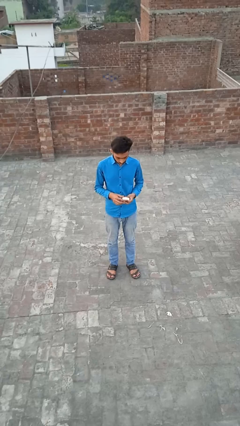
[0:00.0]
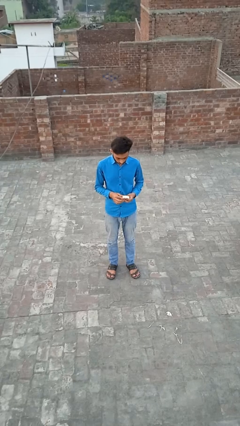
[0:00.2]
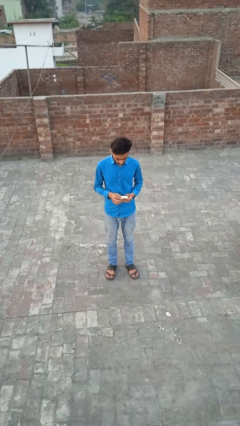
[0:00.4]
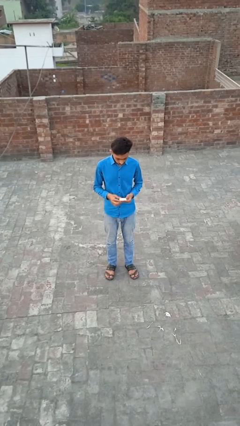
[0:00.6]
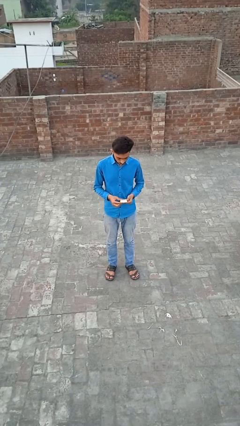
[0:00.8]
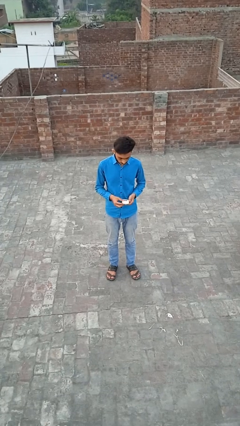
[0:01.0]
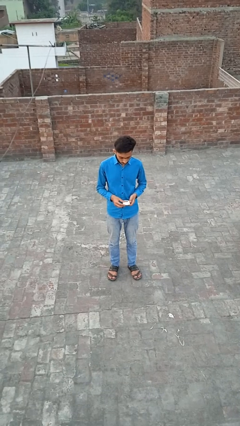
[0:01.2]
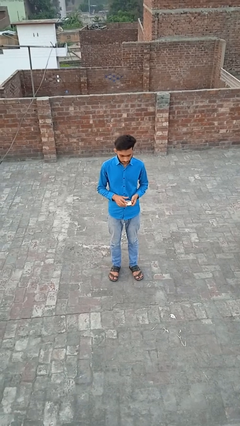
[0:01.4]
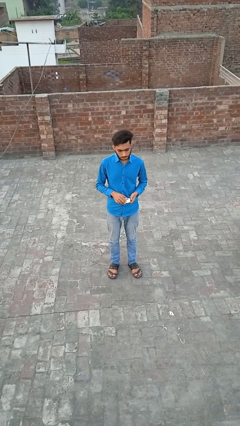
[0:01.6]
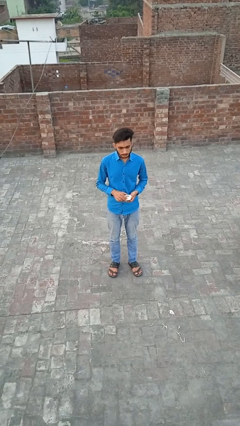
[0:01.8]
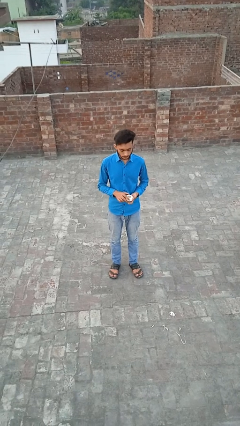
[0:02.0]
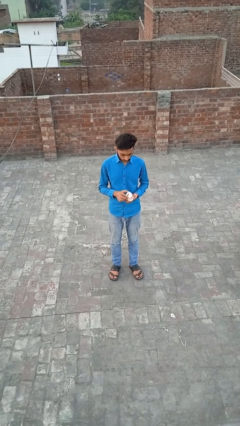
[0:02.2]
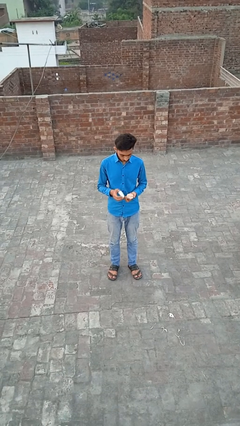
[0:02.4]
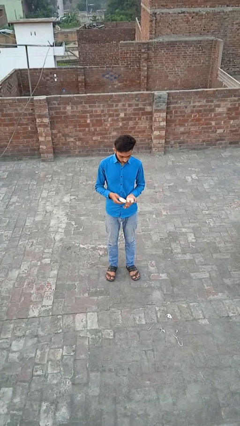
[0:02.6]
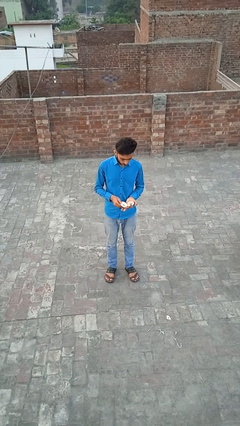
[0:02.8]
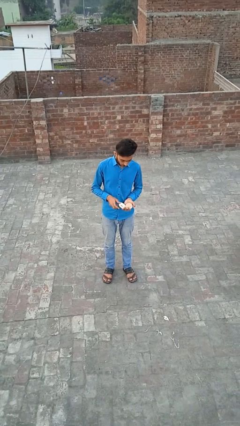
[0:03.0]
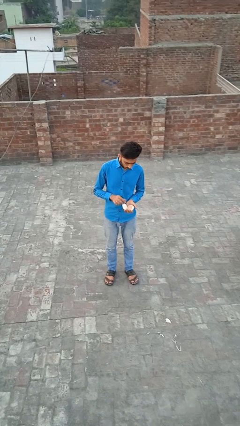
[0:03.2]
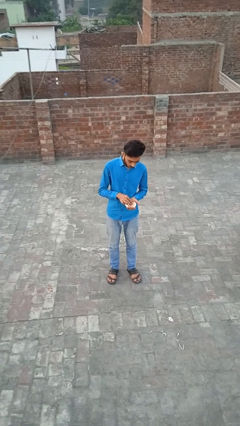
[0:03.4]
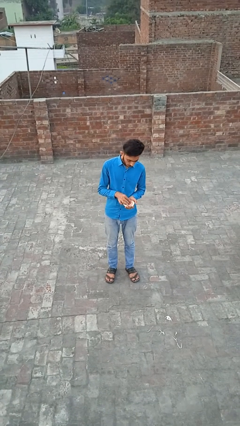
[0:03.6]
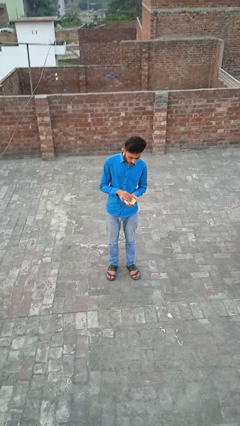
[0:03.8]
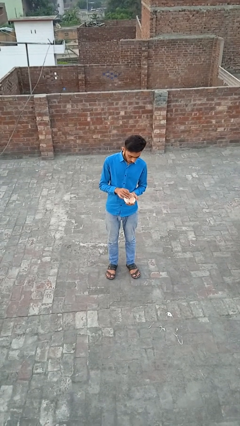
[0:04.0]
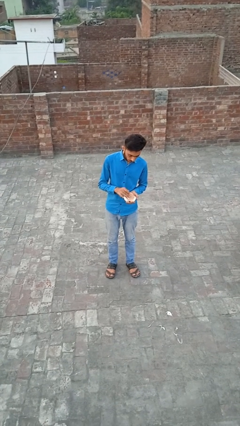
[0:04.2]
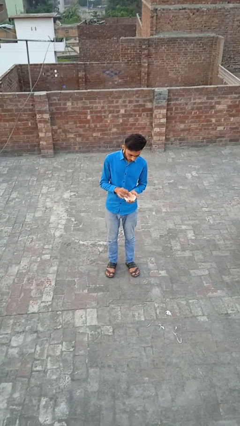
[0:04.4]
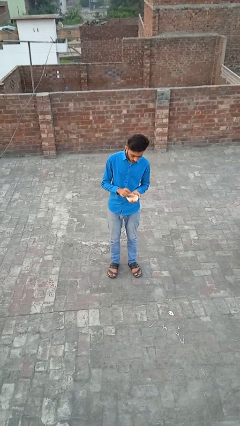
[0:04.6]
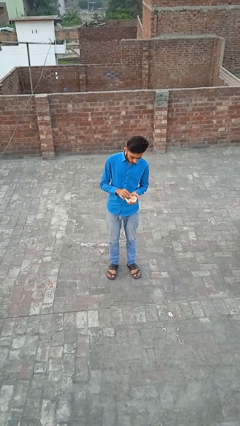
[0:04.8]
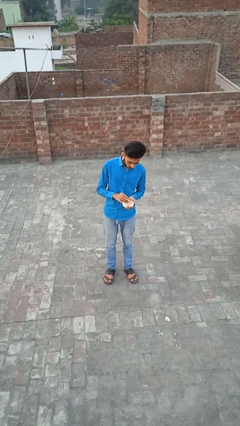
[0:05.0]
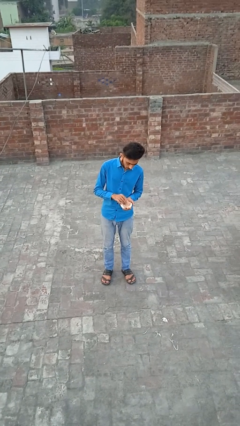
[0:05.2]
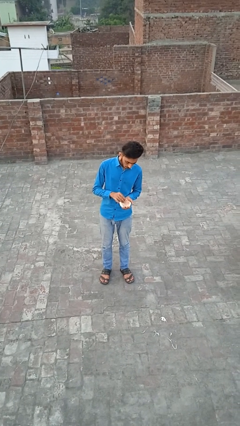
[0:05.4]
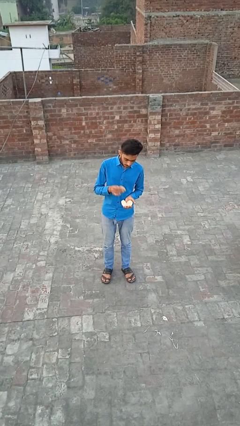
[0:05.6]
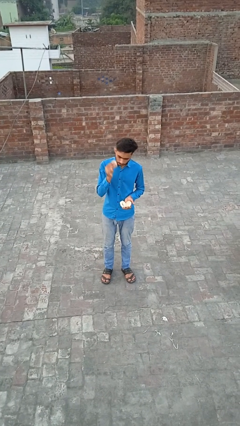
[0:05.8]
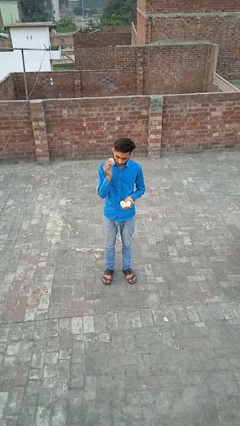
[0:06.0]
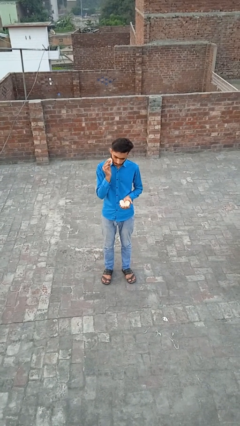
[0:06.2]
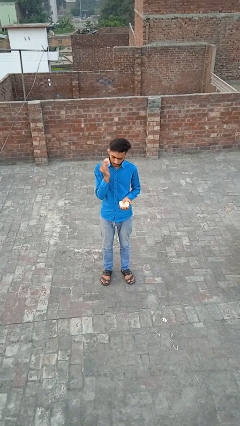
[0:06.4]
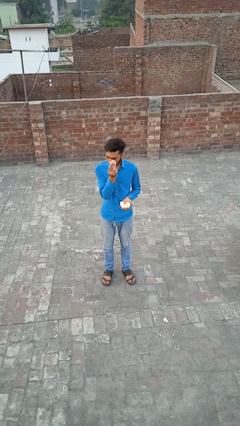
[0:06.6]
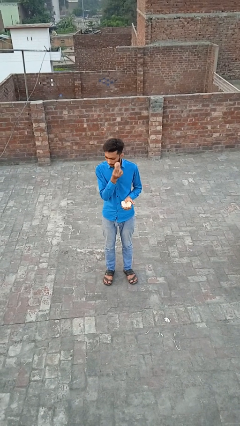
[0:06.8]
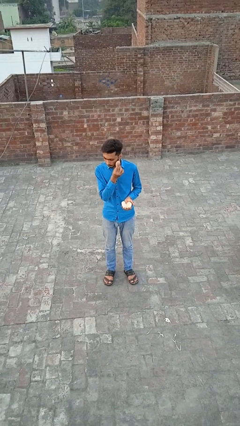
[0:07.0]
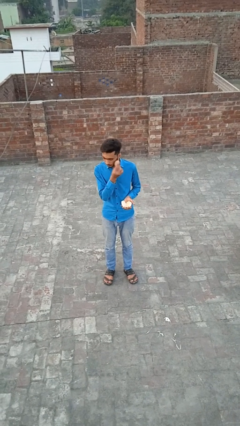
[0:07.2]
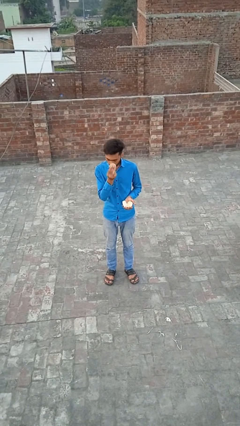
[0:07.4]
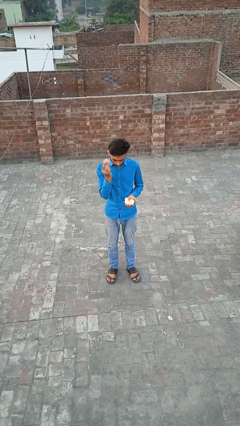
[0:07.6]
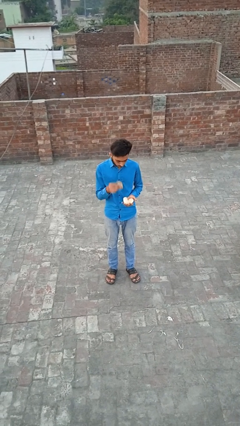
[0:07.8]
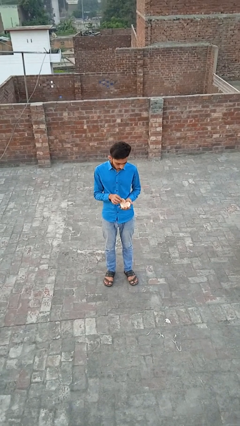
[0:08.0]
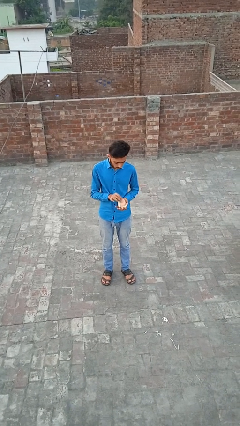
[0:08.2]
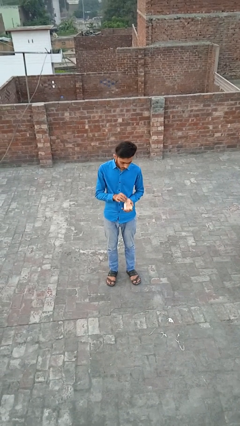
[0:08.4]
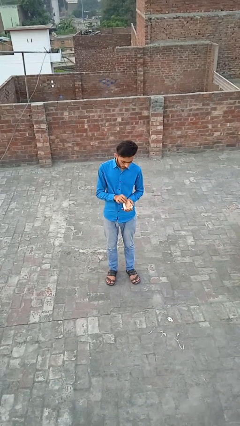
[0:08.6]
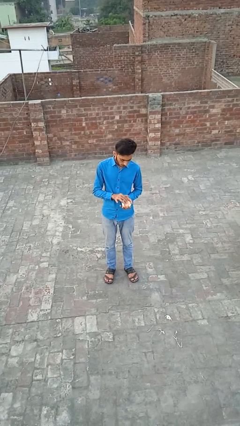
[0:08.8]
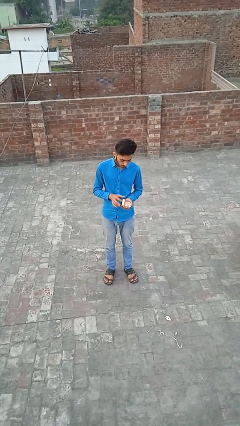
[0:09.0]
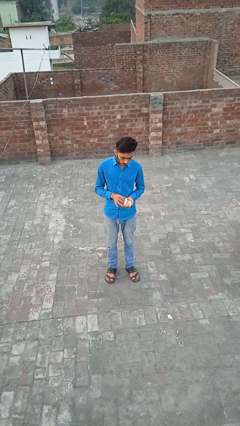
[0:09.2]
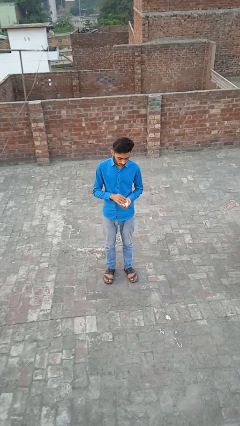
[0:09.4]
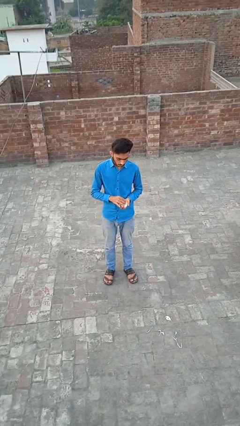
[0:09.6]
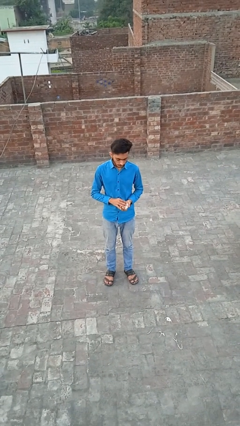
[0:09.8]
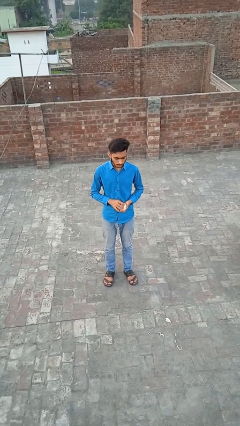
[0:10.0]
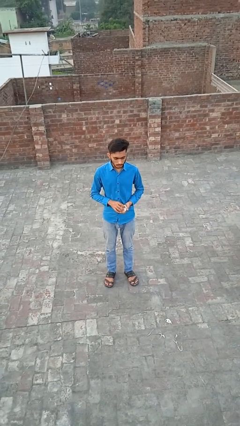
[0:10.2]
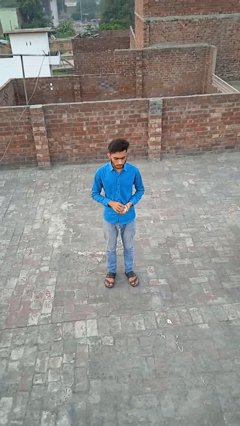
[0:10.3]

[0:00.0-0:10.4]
person applies foundation makeup

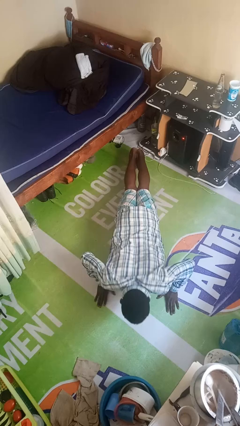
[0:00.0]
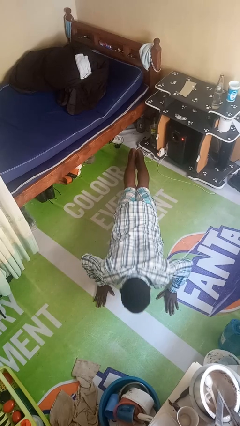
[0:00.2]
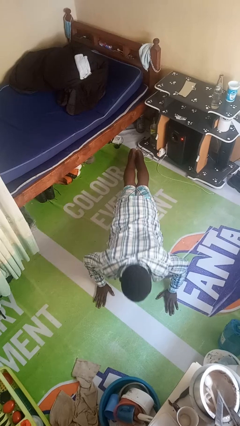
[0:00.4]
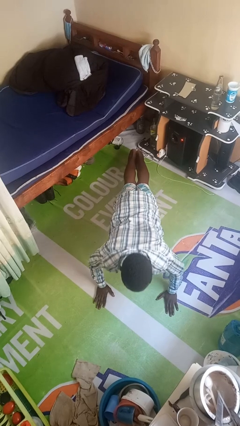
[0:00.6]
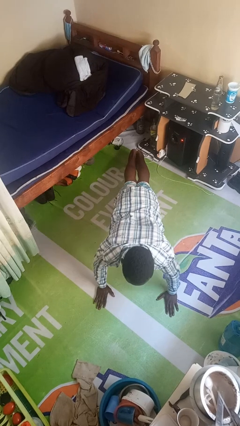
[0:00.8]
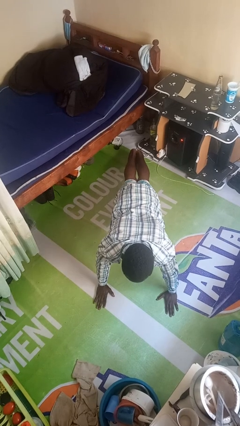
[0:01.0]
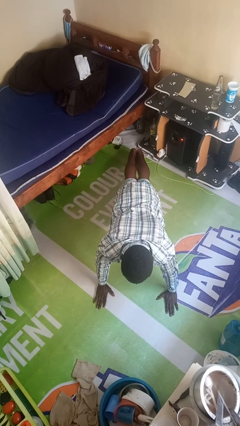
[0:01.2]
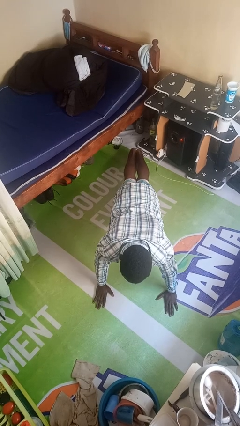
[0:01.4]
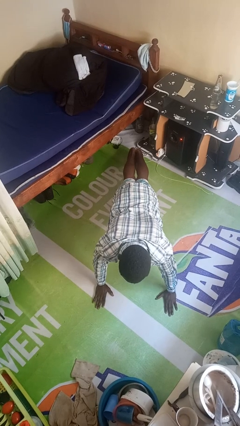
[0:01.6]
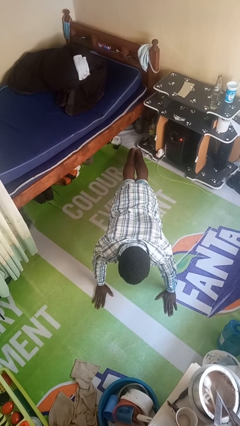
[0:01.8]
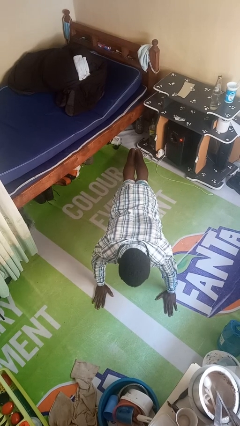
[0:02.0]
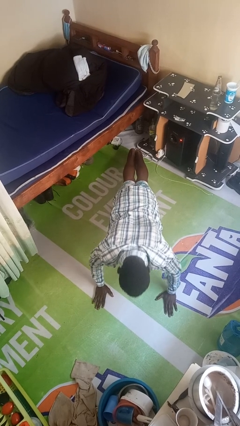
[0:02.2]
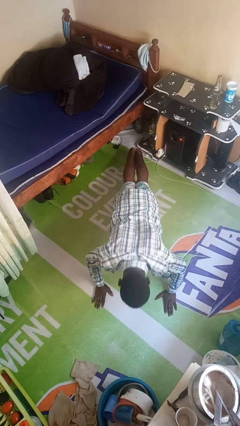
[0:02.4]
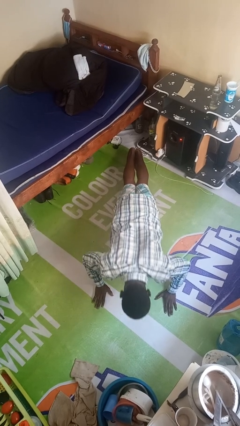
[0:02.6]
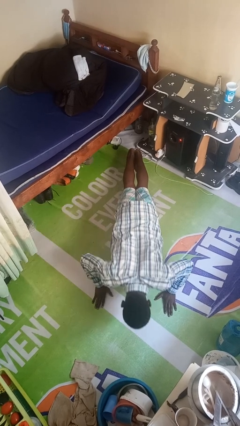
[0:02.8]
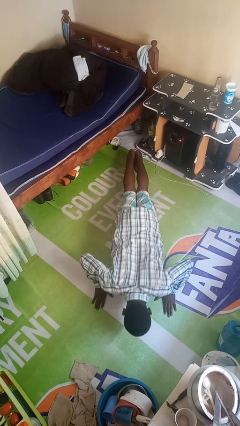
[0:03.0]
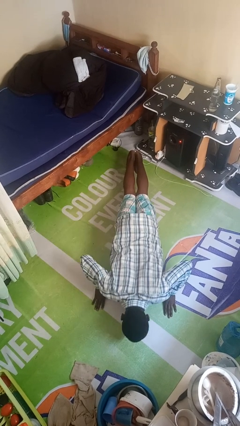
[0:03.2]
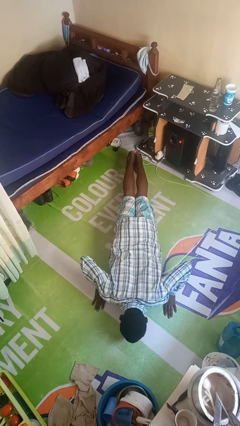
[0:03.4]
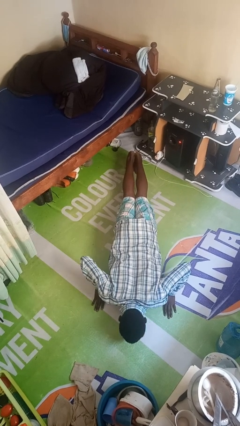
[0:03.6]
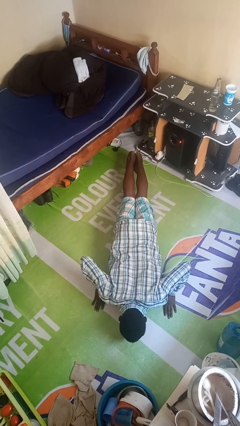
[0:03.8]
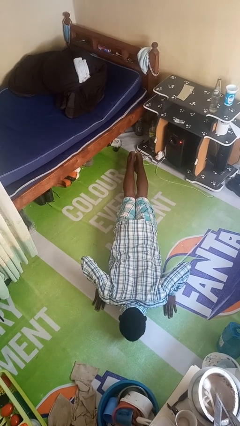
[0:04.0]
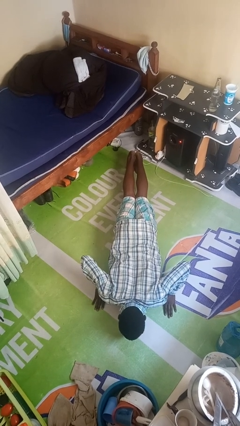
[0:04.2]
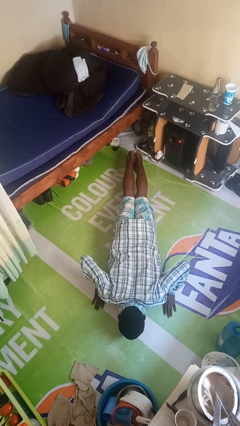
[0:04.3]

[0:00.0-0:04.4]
person exercises with pushup

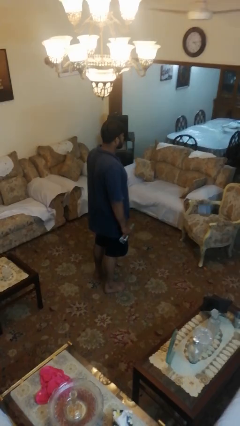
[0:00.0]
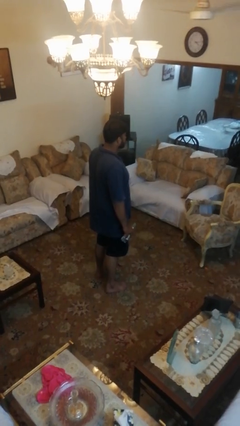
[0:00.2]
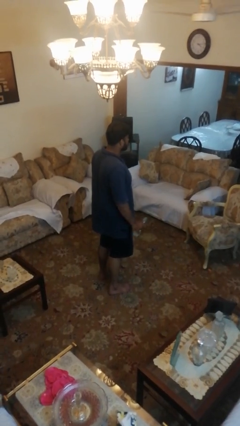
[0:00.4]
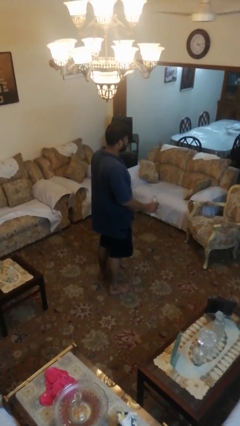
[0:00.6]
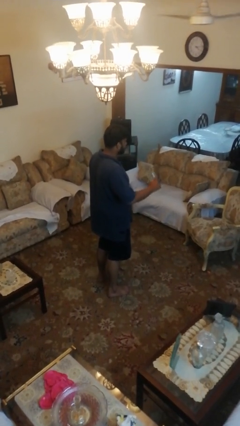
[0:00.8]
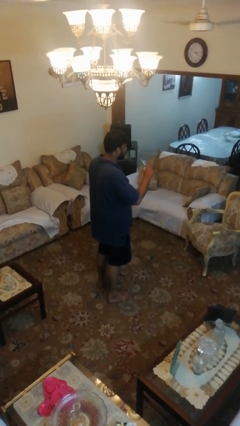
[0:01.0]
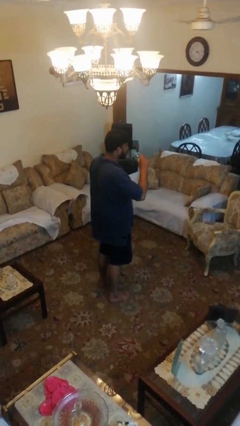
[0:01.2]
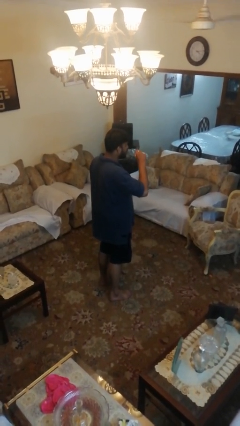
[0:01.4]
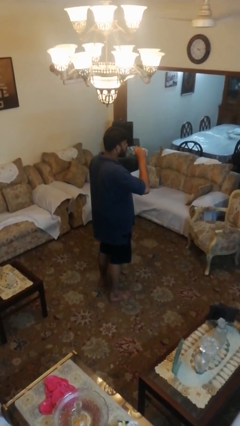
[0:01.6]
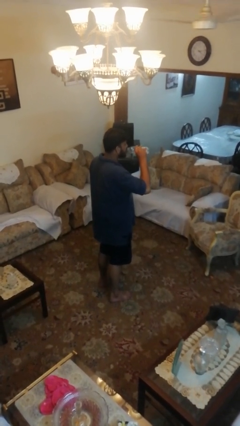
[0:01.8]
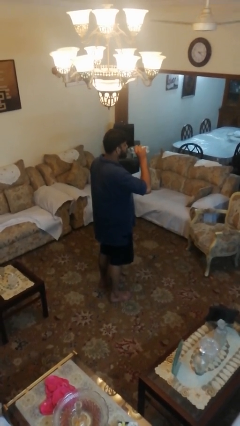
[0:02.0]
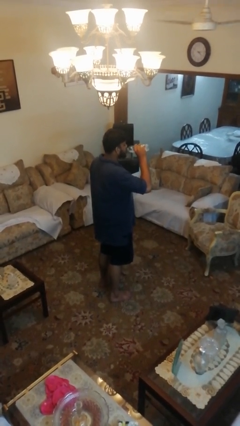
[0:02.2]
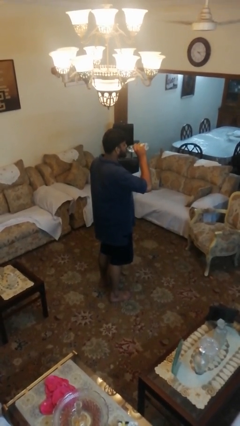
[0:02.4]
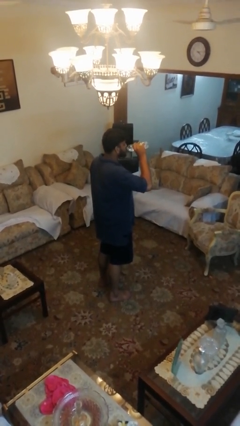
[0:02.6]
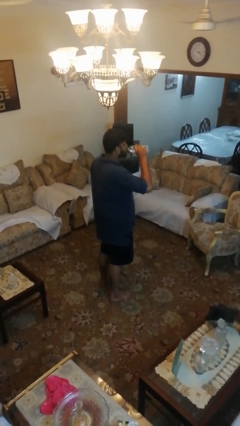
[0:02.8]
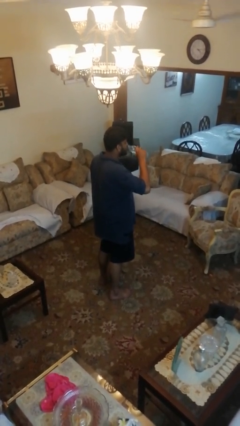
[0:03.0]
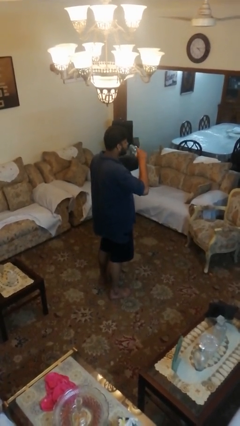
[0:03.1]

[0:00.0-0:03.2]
person drinks from bottle
